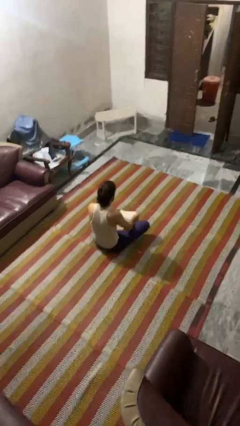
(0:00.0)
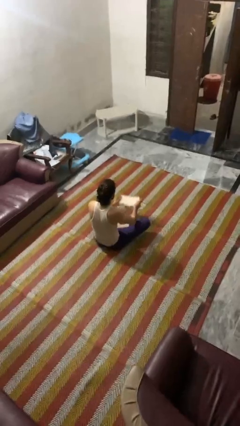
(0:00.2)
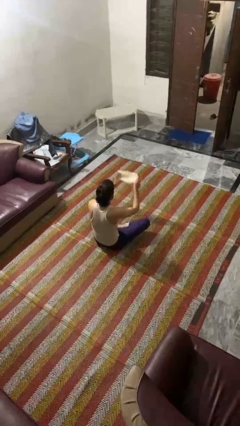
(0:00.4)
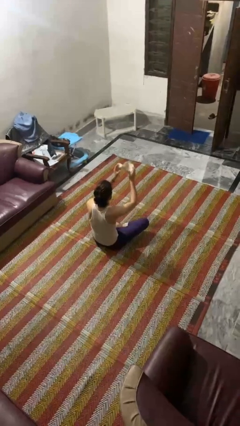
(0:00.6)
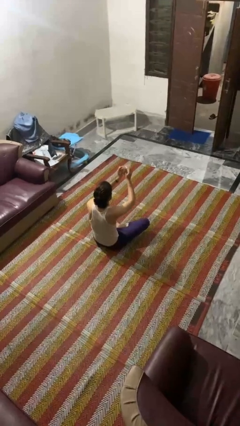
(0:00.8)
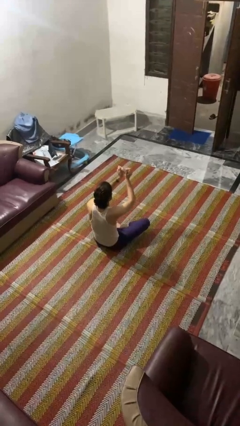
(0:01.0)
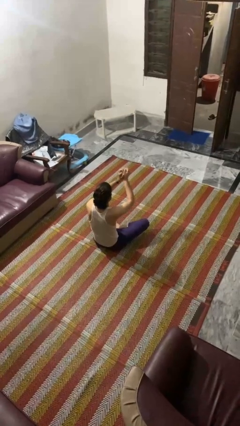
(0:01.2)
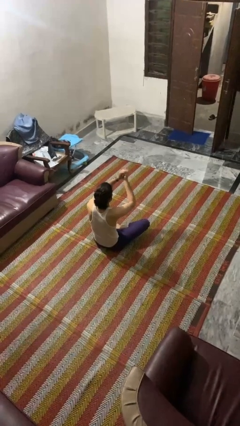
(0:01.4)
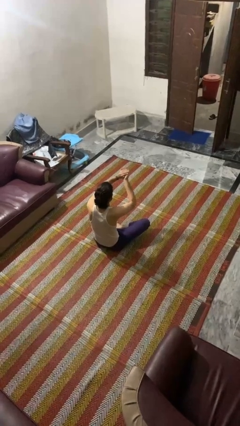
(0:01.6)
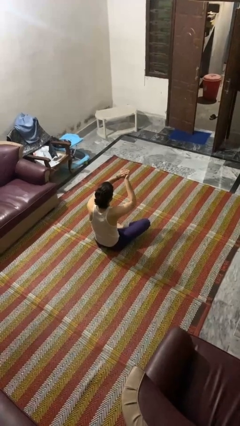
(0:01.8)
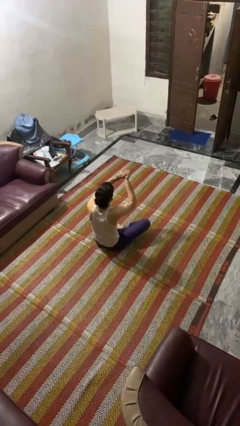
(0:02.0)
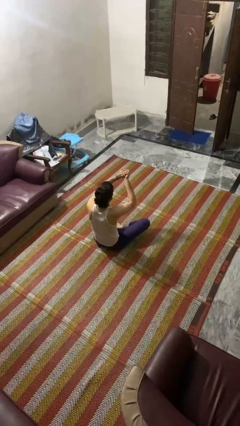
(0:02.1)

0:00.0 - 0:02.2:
person crumples paper

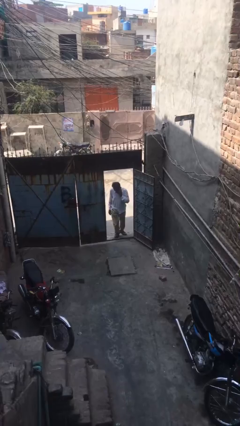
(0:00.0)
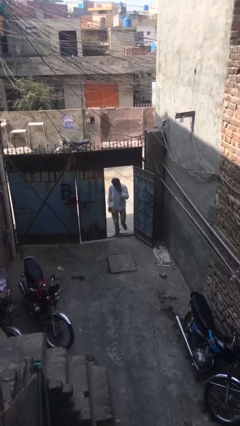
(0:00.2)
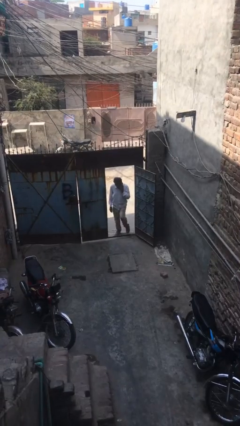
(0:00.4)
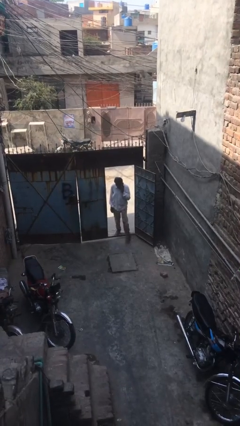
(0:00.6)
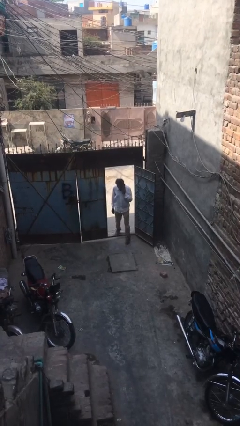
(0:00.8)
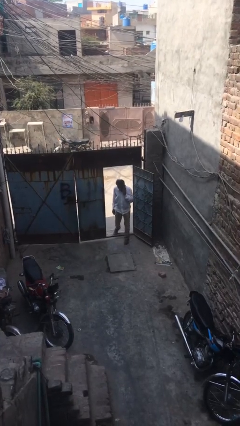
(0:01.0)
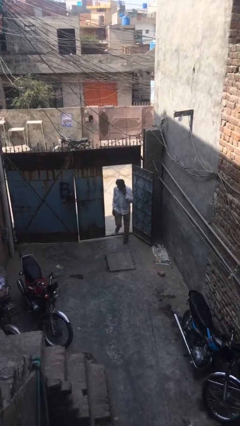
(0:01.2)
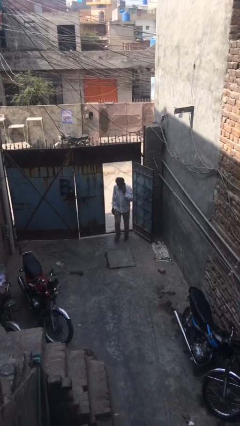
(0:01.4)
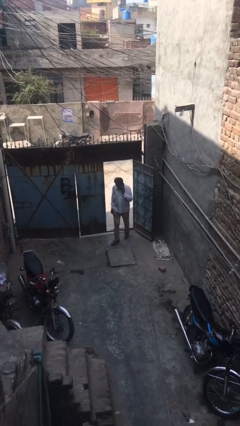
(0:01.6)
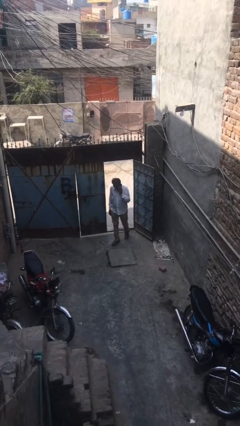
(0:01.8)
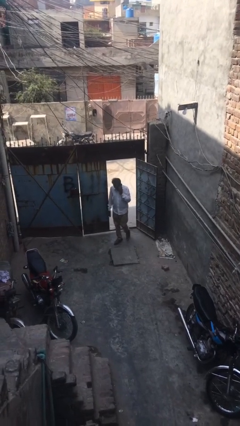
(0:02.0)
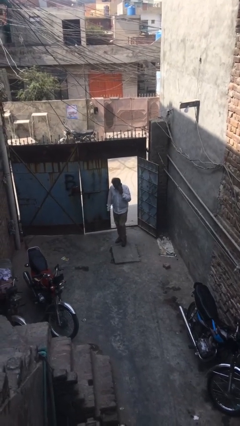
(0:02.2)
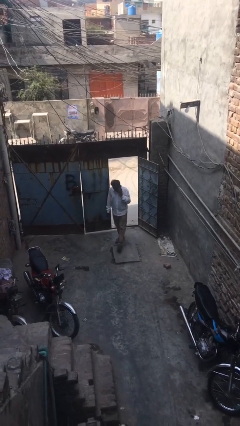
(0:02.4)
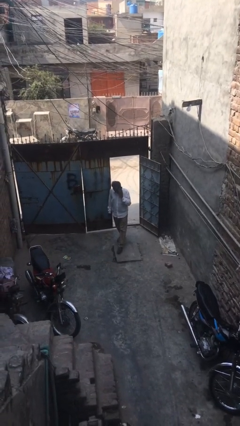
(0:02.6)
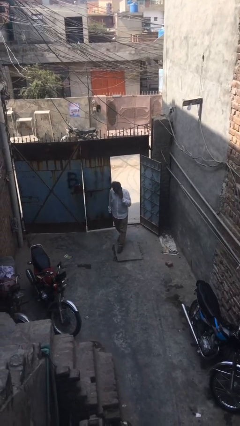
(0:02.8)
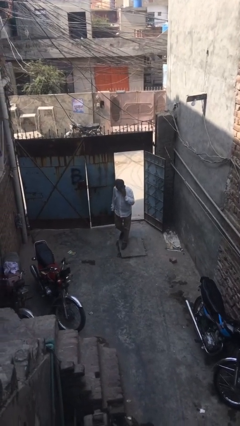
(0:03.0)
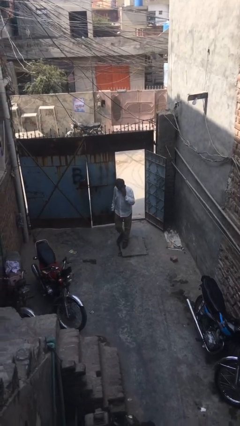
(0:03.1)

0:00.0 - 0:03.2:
person enters scene through structure

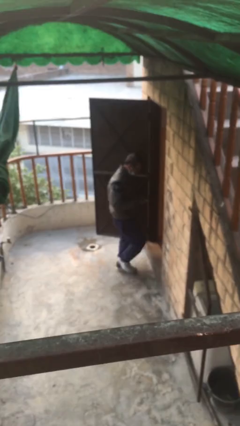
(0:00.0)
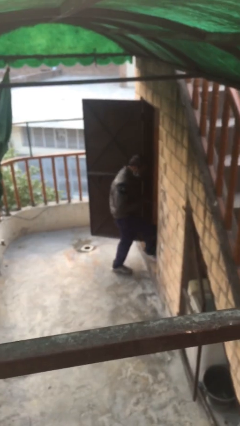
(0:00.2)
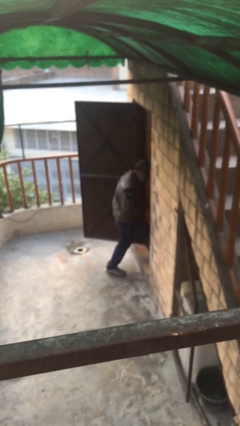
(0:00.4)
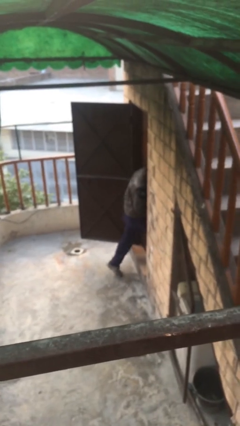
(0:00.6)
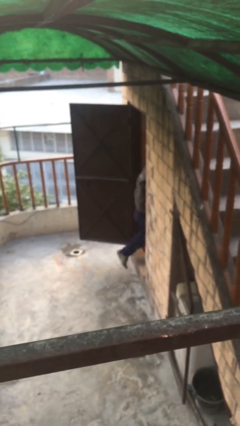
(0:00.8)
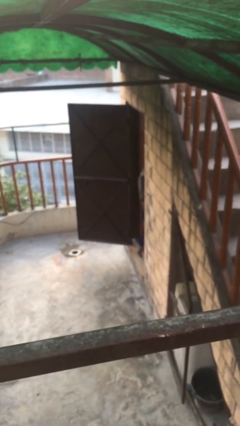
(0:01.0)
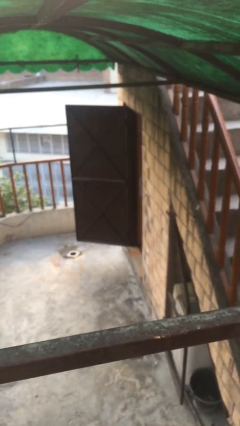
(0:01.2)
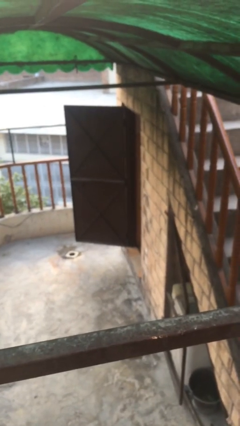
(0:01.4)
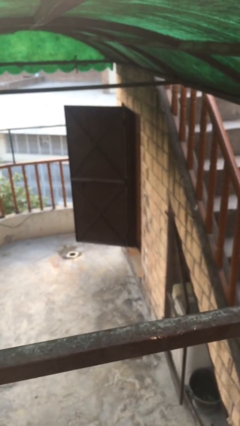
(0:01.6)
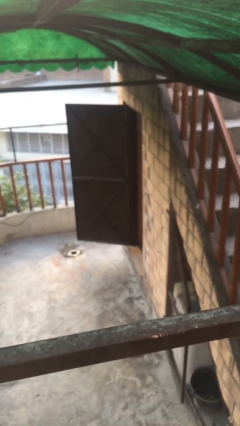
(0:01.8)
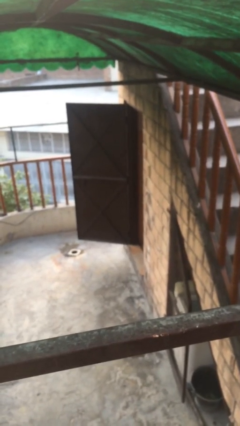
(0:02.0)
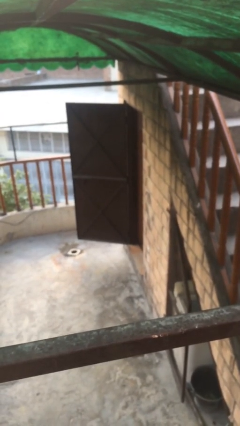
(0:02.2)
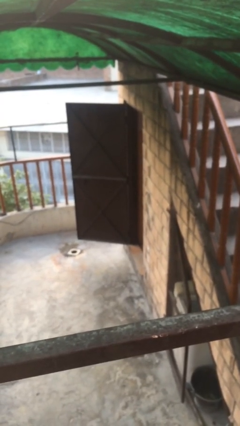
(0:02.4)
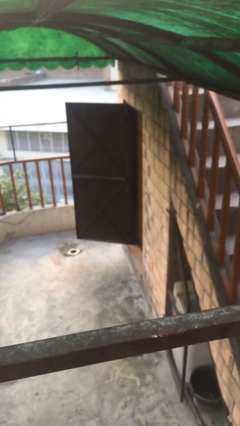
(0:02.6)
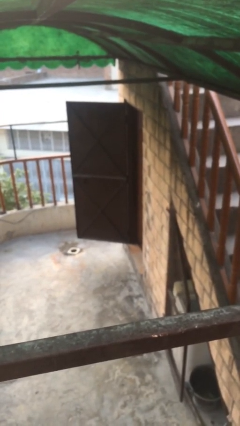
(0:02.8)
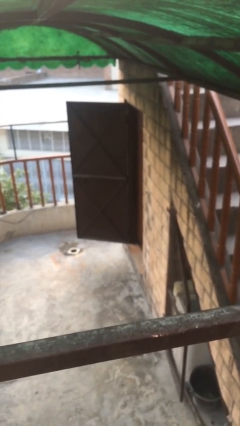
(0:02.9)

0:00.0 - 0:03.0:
person exits scene through structure

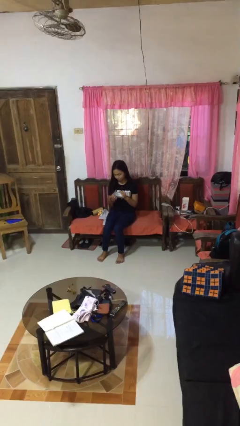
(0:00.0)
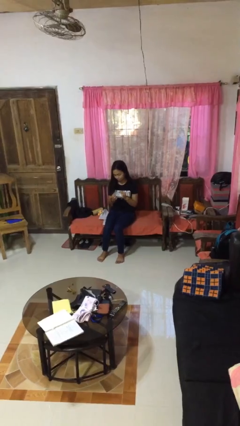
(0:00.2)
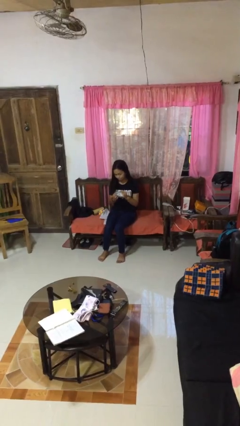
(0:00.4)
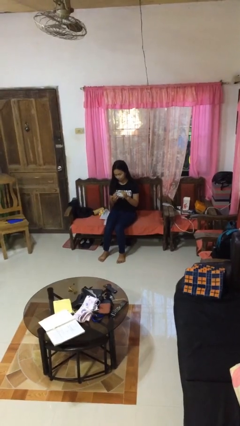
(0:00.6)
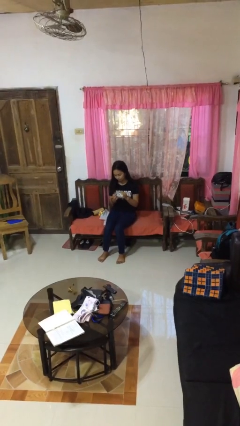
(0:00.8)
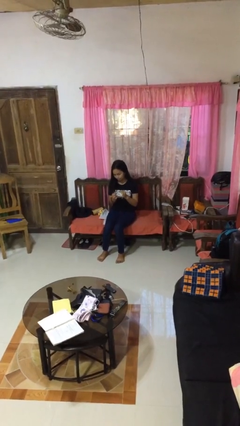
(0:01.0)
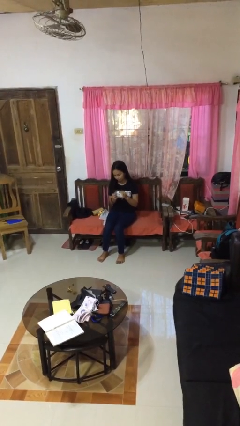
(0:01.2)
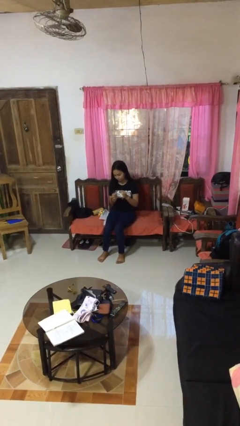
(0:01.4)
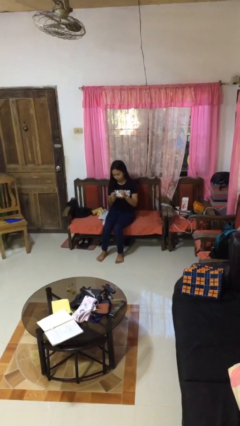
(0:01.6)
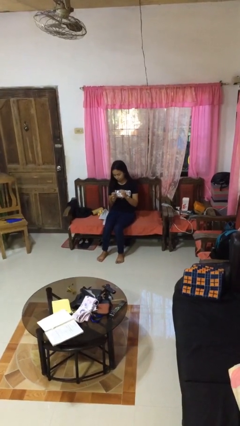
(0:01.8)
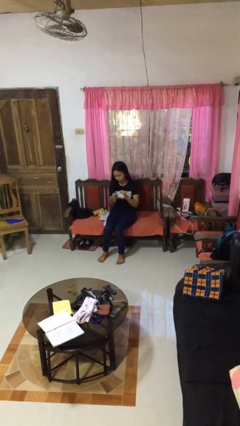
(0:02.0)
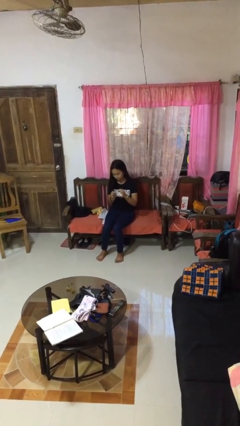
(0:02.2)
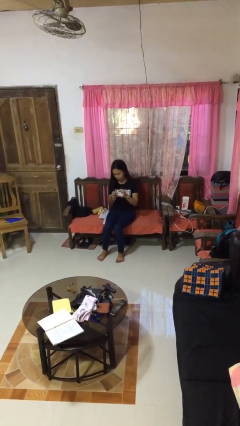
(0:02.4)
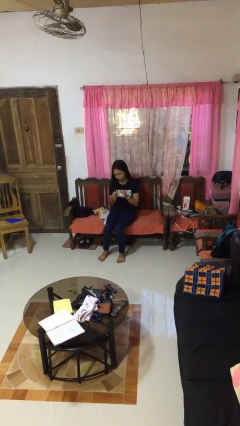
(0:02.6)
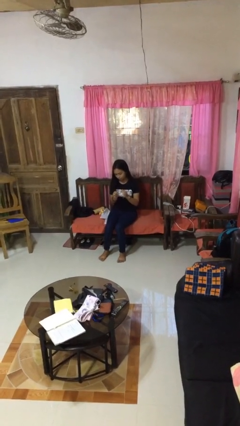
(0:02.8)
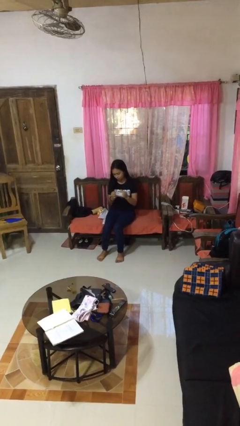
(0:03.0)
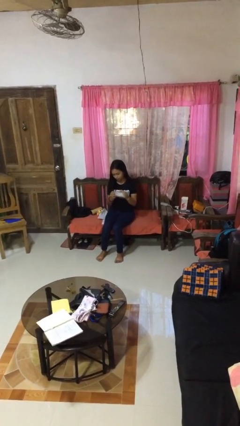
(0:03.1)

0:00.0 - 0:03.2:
person clips fingernails

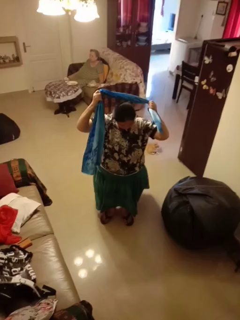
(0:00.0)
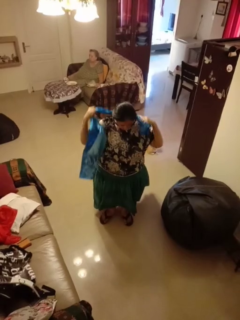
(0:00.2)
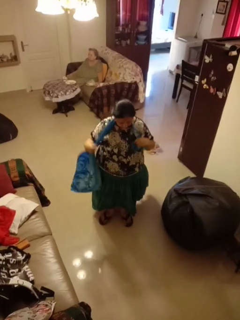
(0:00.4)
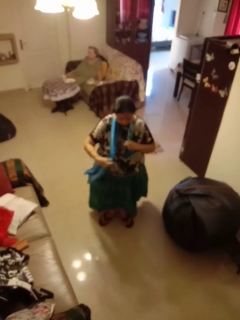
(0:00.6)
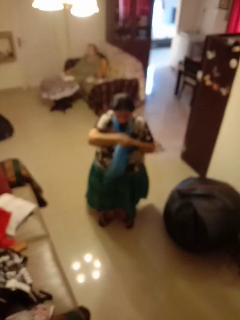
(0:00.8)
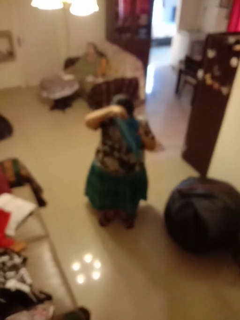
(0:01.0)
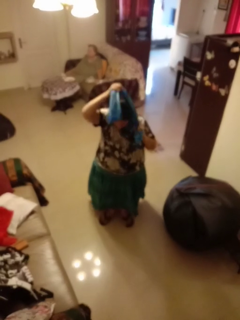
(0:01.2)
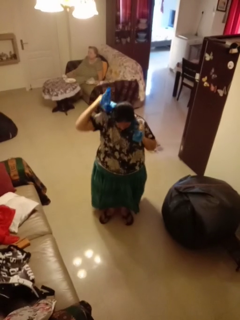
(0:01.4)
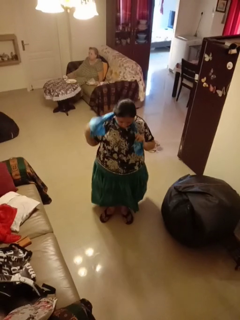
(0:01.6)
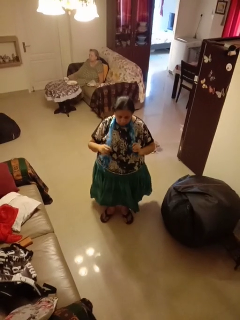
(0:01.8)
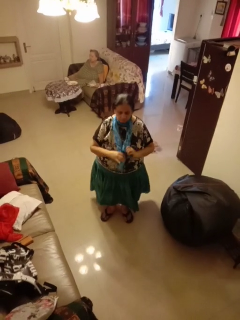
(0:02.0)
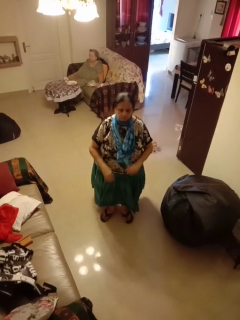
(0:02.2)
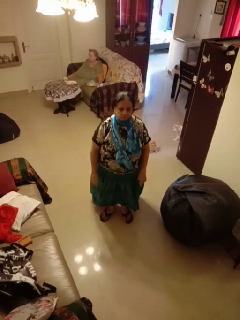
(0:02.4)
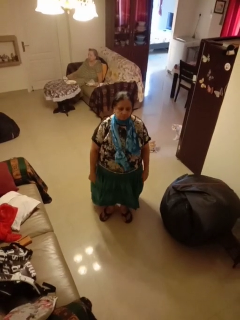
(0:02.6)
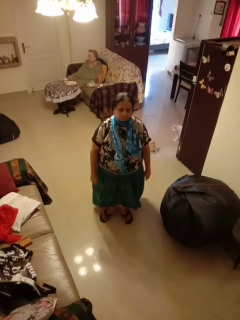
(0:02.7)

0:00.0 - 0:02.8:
person puts on scarf

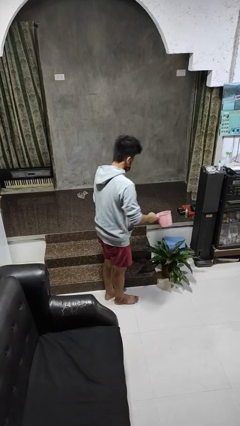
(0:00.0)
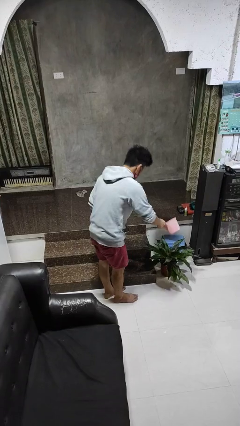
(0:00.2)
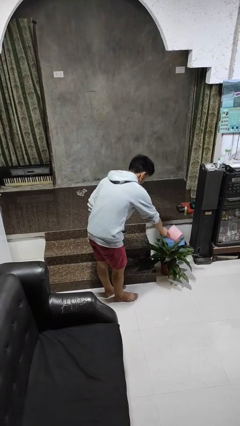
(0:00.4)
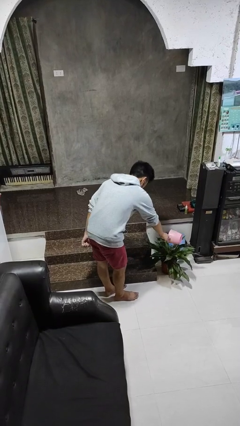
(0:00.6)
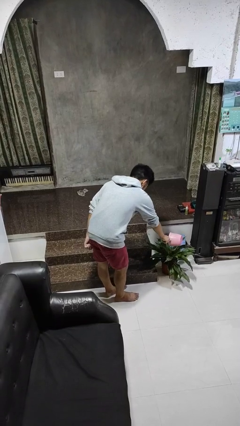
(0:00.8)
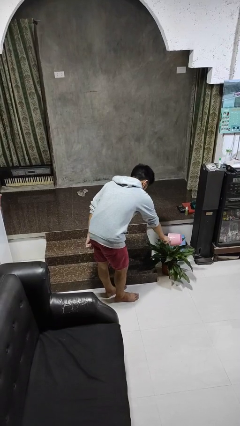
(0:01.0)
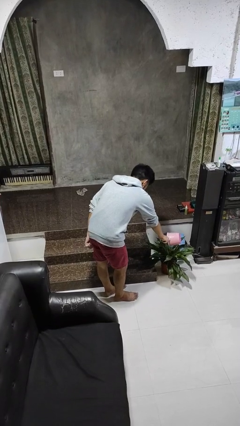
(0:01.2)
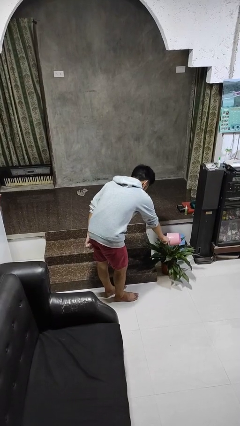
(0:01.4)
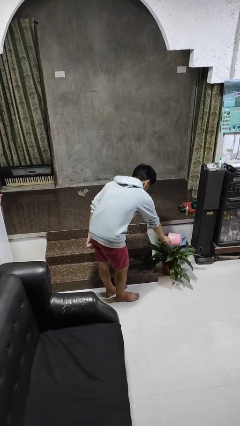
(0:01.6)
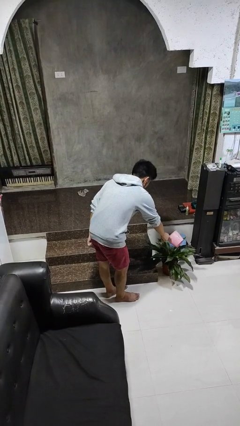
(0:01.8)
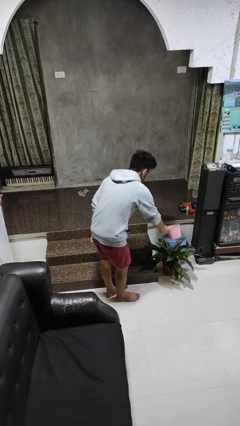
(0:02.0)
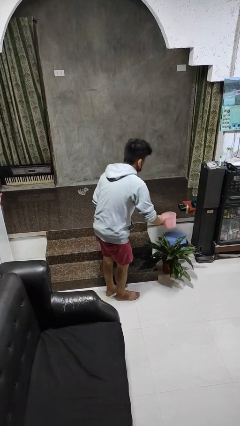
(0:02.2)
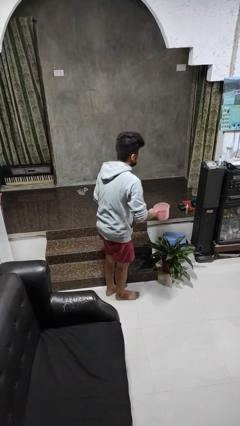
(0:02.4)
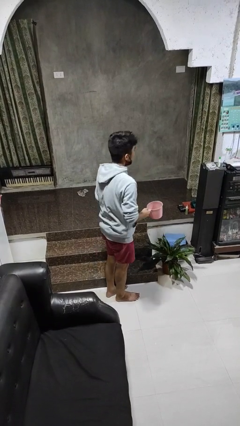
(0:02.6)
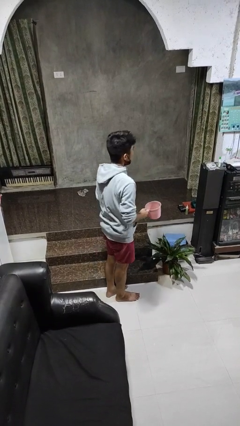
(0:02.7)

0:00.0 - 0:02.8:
person waters houseplant

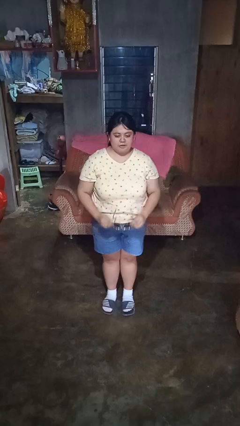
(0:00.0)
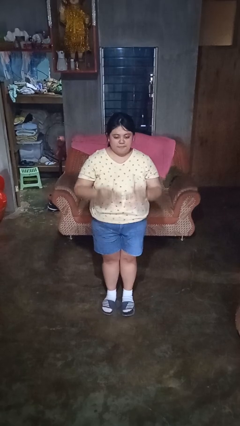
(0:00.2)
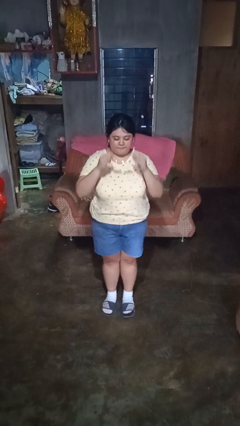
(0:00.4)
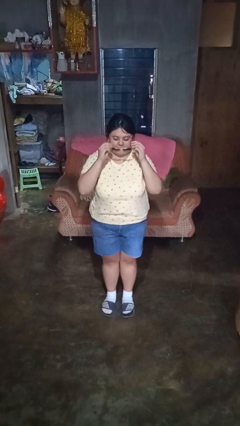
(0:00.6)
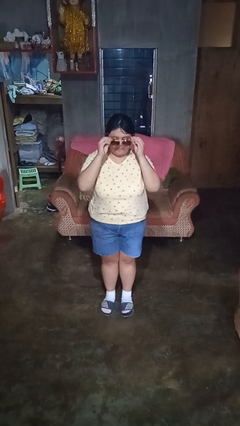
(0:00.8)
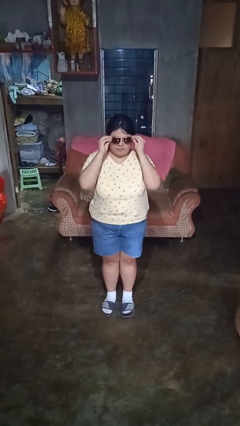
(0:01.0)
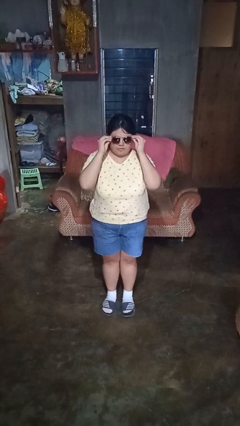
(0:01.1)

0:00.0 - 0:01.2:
person puts on sunglasses
